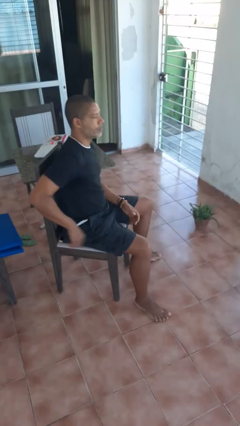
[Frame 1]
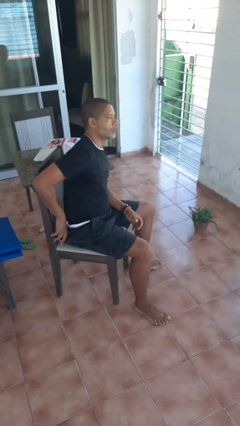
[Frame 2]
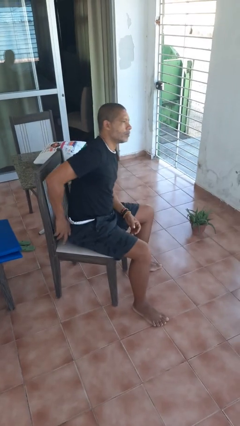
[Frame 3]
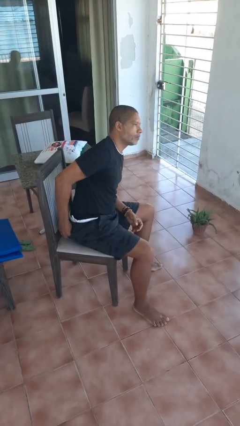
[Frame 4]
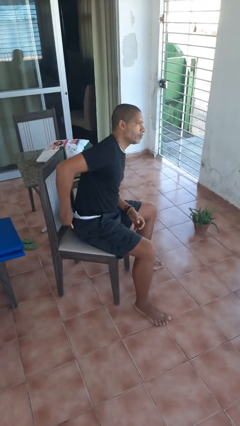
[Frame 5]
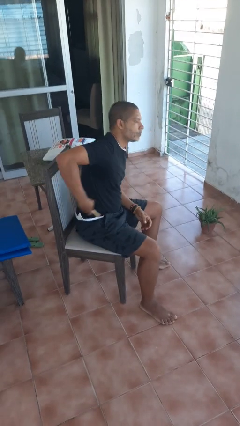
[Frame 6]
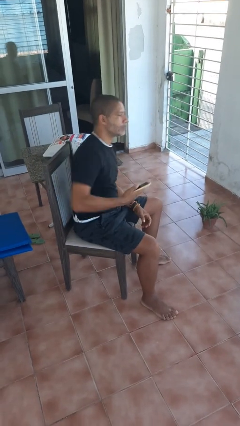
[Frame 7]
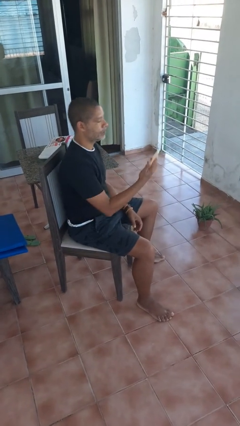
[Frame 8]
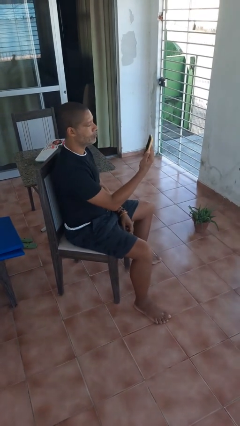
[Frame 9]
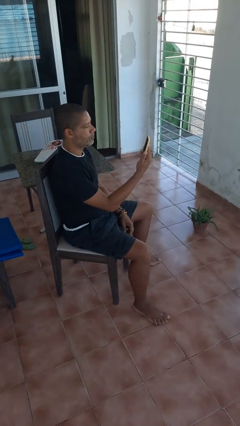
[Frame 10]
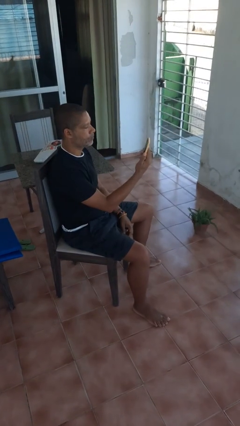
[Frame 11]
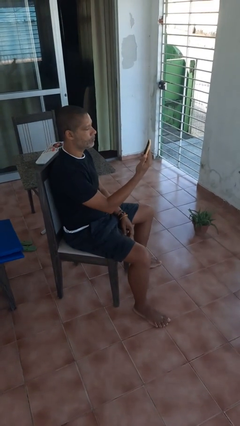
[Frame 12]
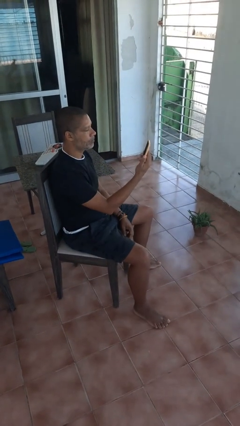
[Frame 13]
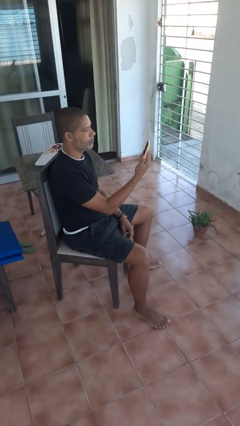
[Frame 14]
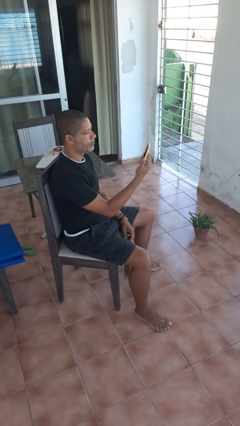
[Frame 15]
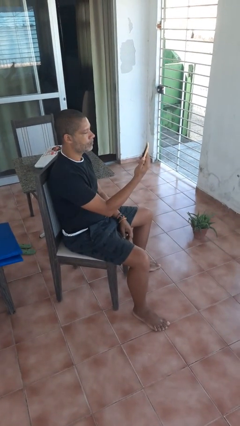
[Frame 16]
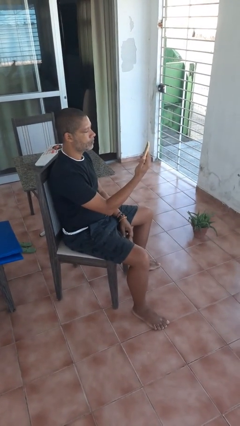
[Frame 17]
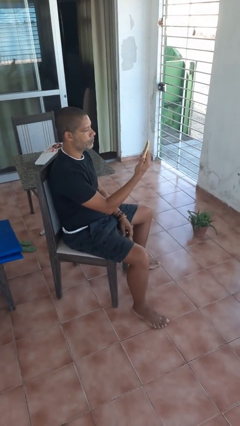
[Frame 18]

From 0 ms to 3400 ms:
person takes phone from pocket

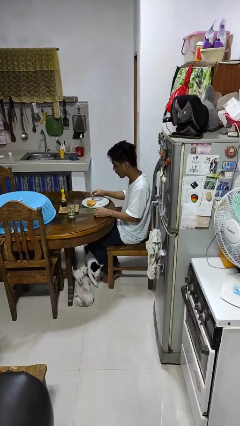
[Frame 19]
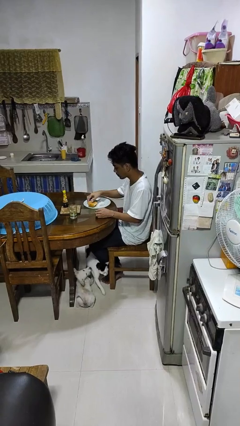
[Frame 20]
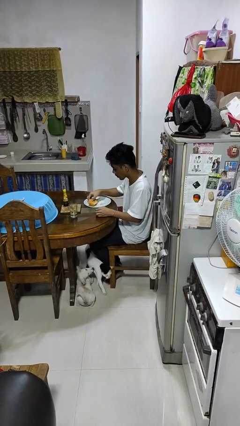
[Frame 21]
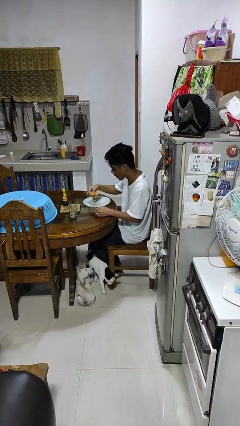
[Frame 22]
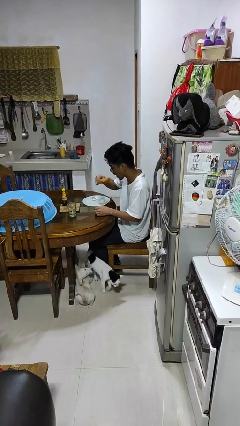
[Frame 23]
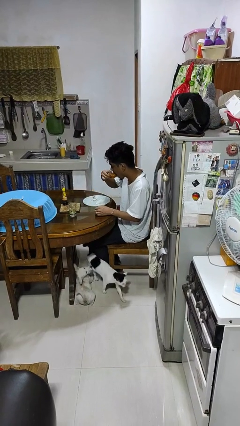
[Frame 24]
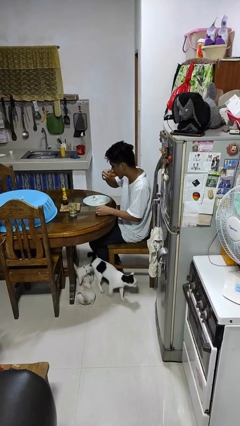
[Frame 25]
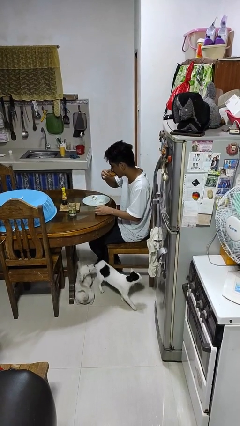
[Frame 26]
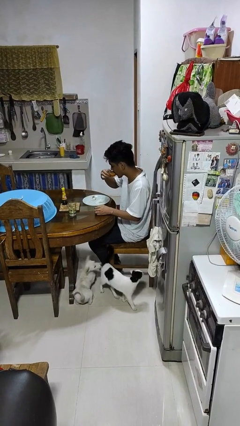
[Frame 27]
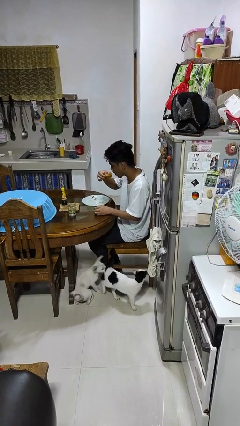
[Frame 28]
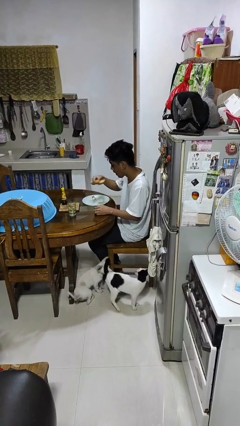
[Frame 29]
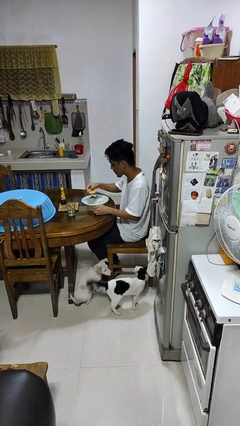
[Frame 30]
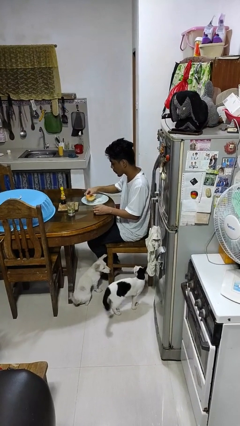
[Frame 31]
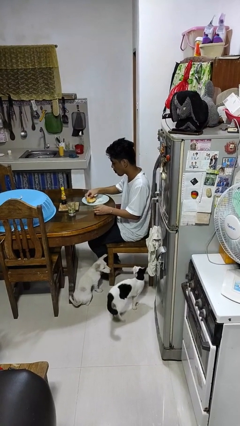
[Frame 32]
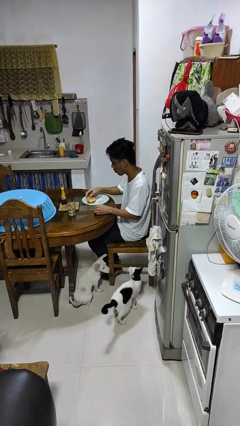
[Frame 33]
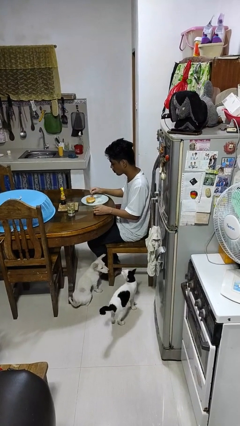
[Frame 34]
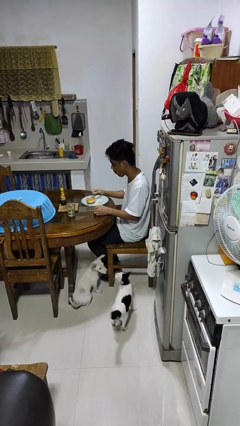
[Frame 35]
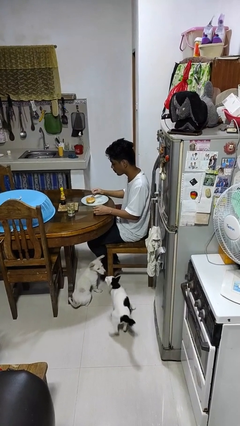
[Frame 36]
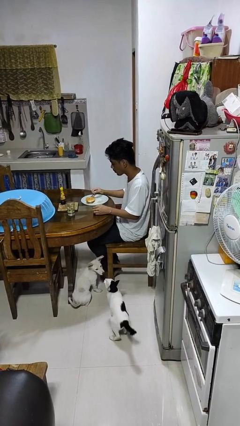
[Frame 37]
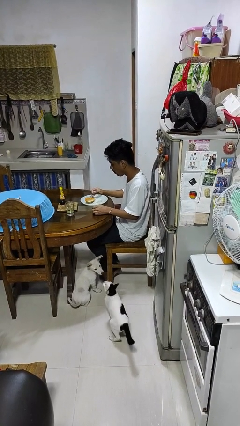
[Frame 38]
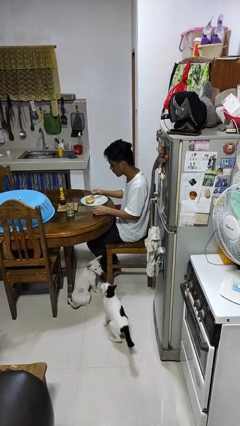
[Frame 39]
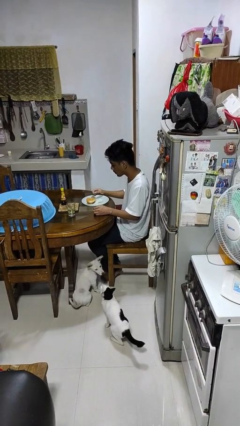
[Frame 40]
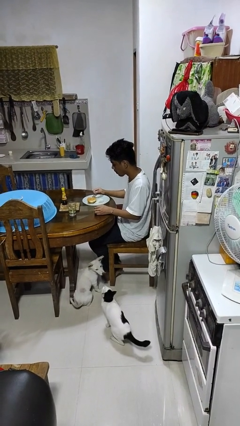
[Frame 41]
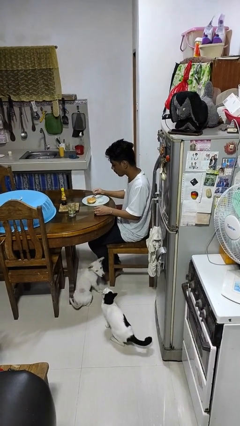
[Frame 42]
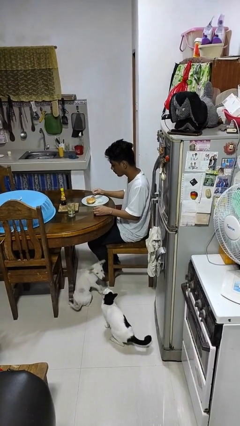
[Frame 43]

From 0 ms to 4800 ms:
person eats with hands

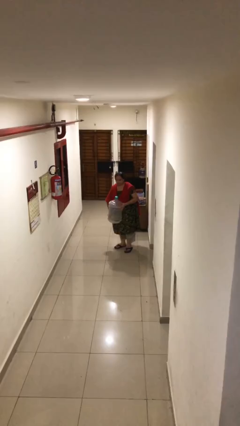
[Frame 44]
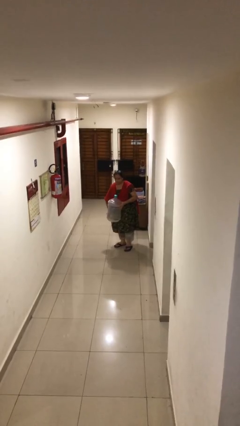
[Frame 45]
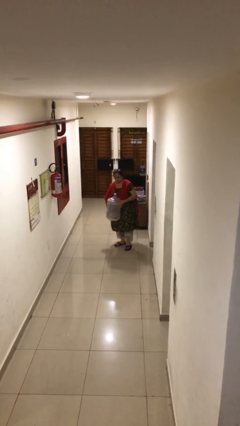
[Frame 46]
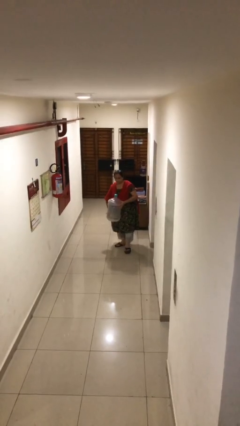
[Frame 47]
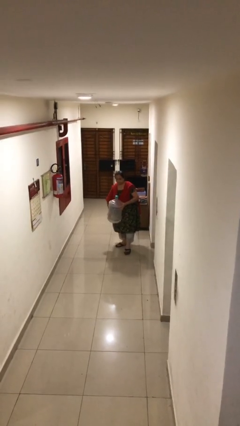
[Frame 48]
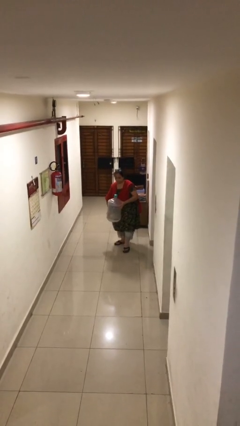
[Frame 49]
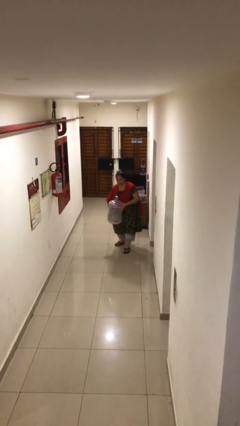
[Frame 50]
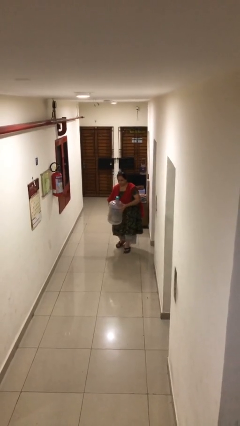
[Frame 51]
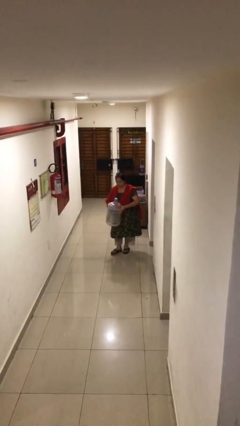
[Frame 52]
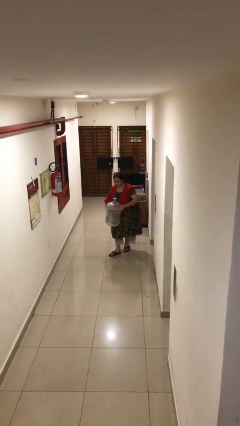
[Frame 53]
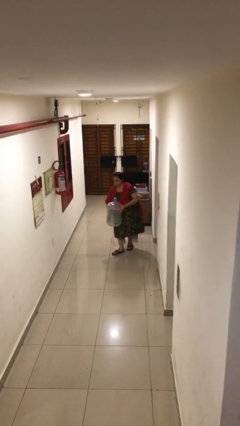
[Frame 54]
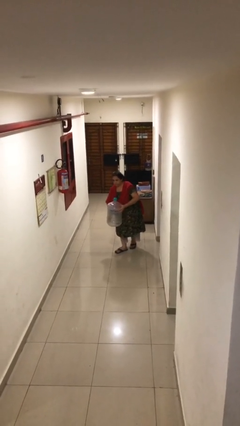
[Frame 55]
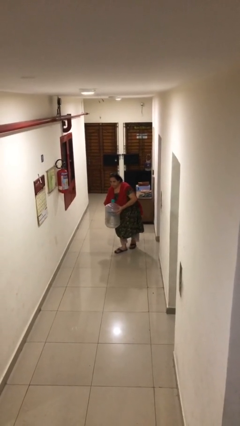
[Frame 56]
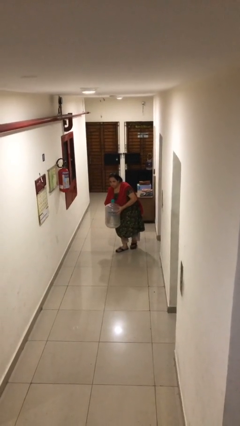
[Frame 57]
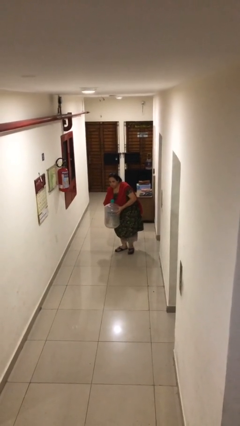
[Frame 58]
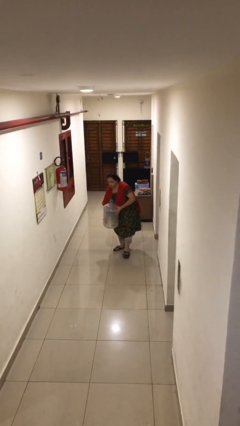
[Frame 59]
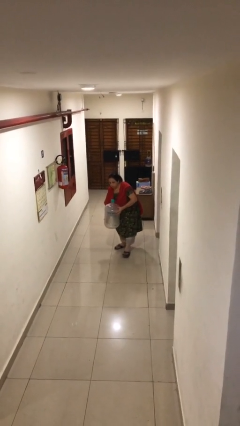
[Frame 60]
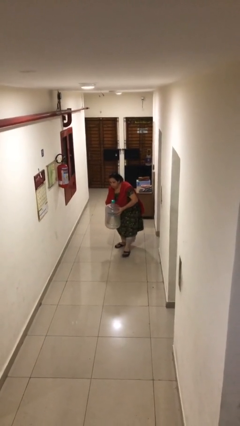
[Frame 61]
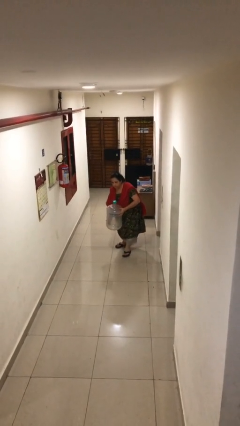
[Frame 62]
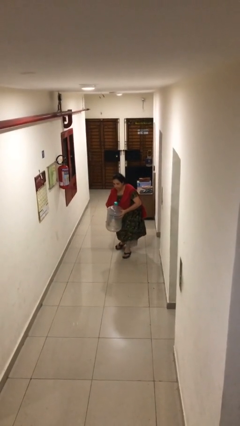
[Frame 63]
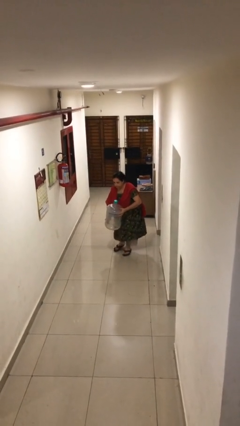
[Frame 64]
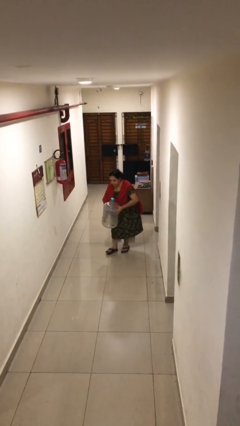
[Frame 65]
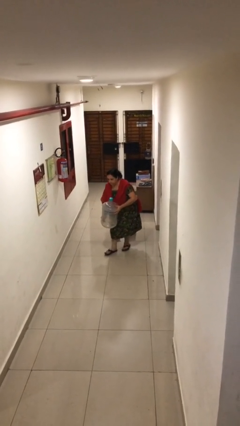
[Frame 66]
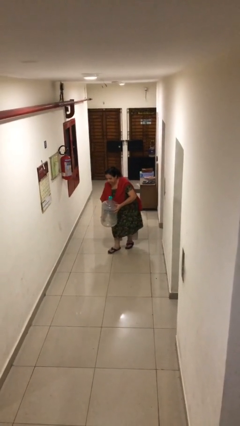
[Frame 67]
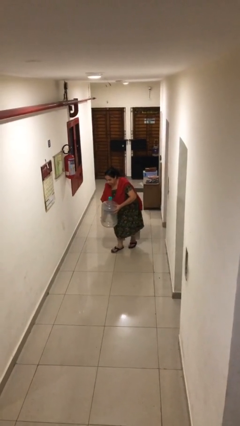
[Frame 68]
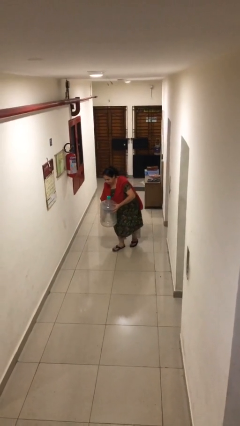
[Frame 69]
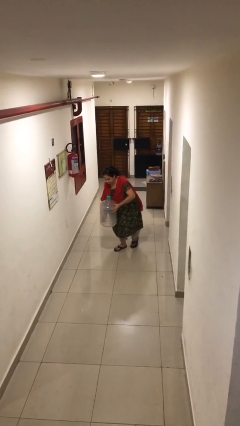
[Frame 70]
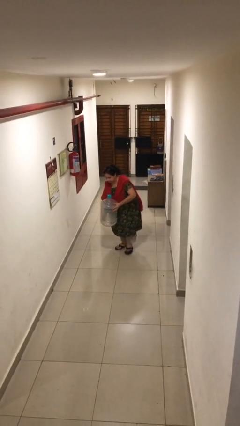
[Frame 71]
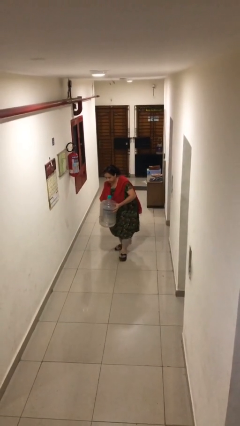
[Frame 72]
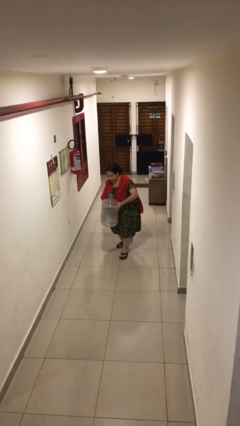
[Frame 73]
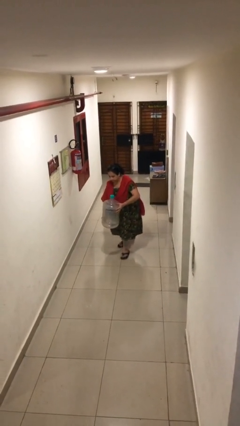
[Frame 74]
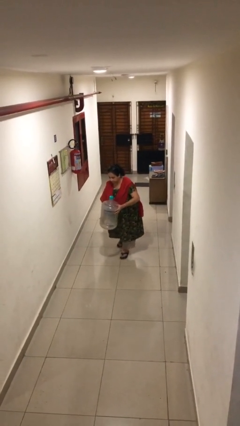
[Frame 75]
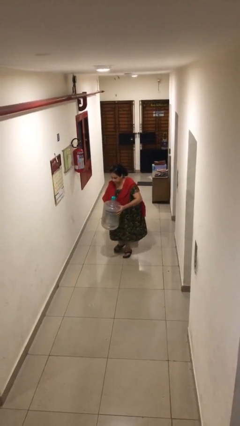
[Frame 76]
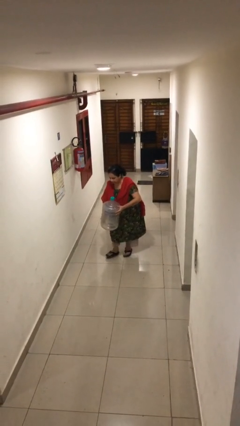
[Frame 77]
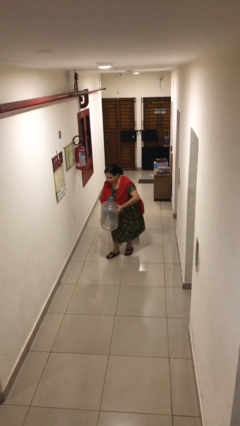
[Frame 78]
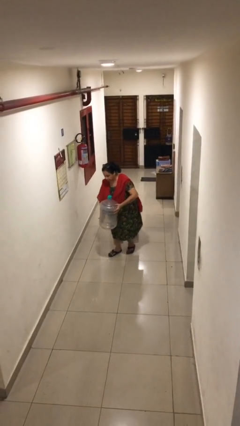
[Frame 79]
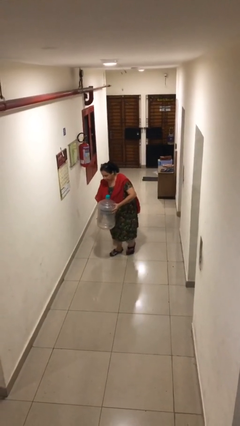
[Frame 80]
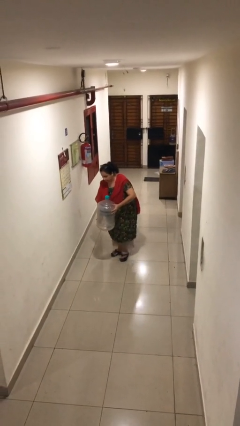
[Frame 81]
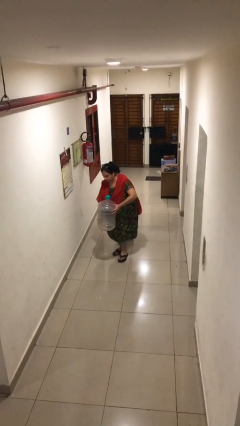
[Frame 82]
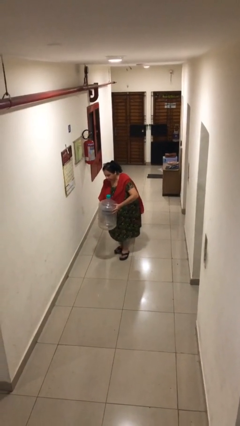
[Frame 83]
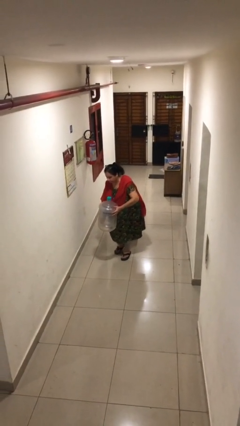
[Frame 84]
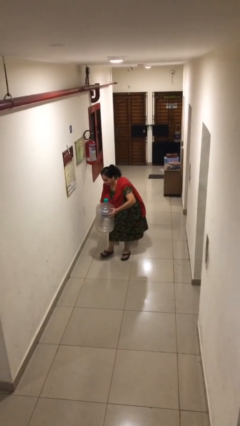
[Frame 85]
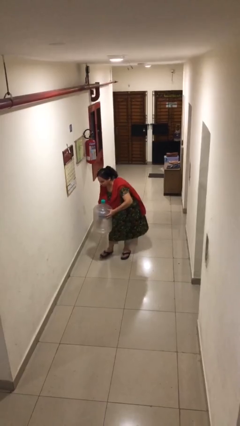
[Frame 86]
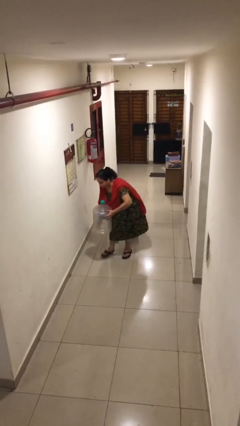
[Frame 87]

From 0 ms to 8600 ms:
person carries heavy object

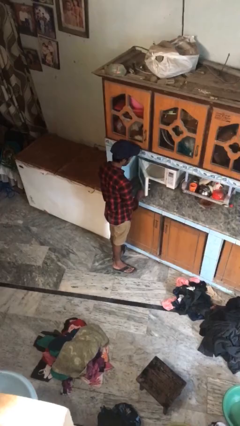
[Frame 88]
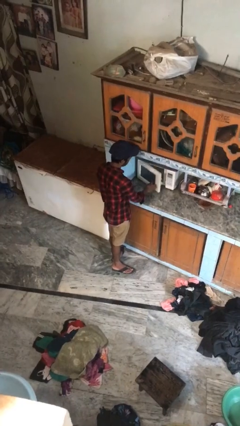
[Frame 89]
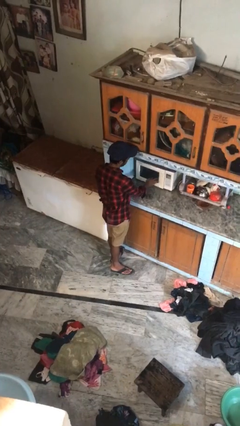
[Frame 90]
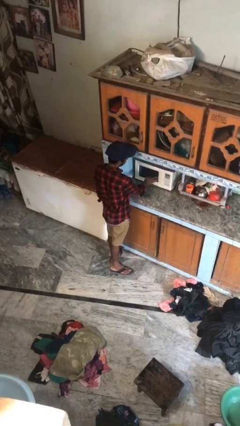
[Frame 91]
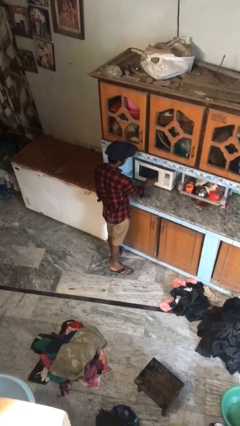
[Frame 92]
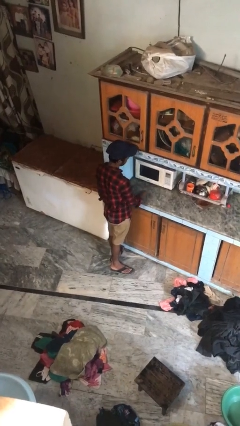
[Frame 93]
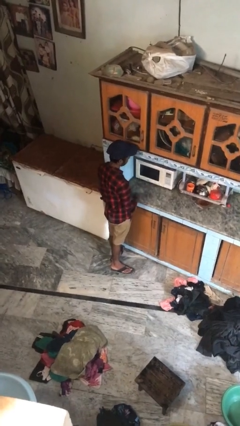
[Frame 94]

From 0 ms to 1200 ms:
person closes oven door
